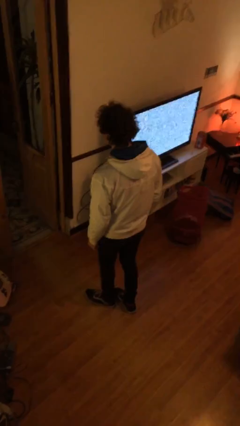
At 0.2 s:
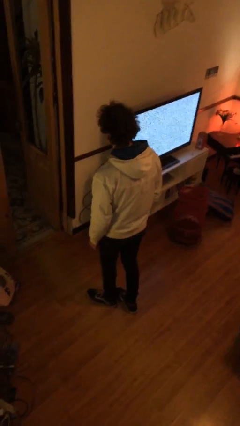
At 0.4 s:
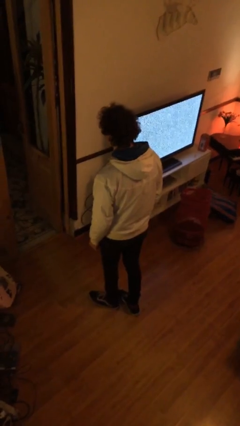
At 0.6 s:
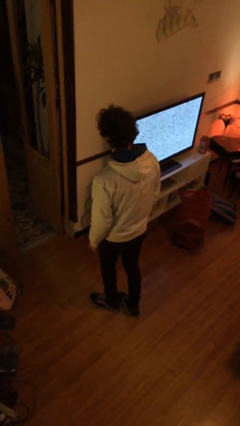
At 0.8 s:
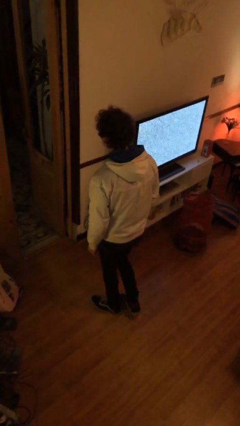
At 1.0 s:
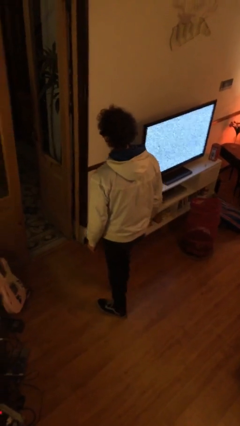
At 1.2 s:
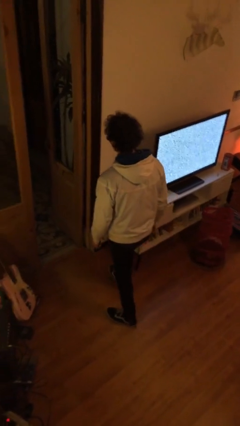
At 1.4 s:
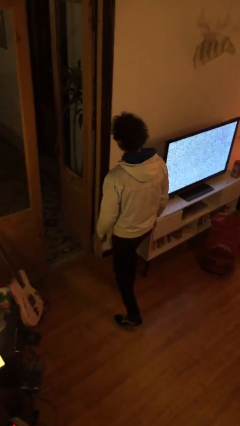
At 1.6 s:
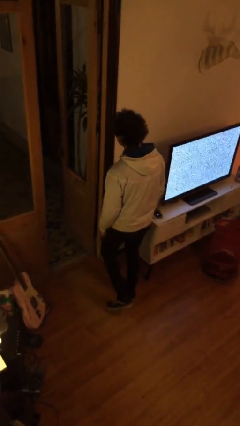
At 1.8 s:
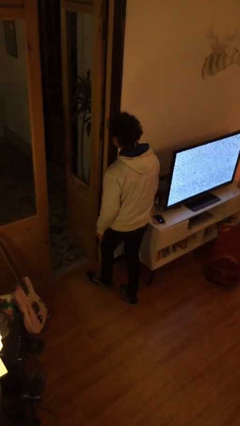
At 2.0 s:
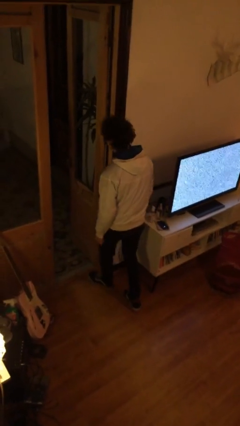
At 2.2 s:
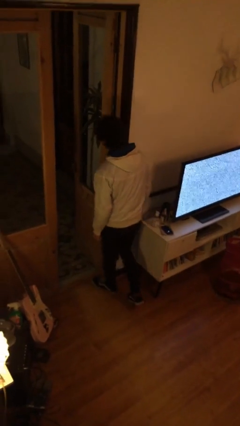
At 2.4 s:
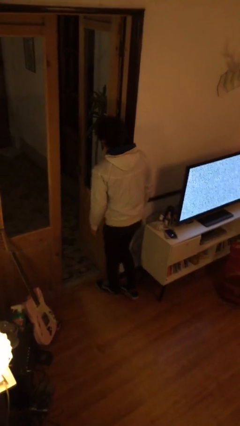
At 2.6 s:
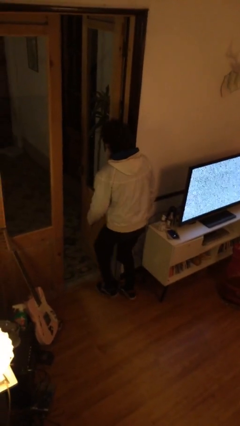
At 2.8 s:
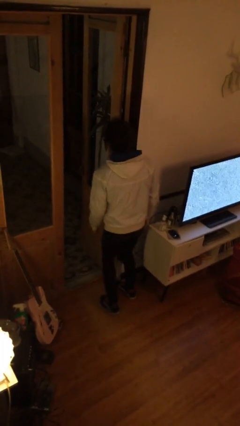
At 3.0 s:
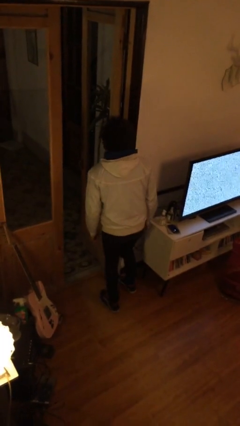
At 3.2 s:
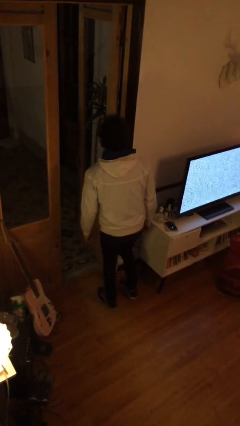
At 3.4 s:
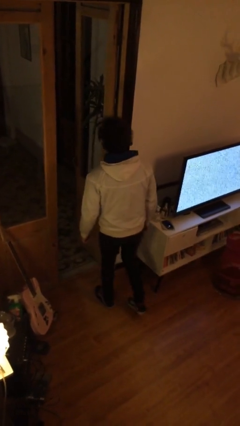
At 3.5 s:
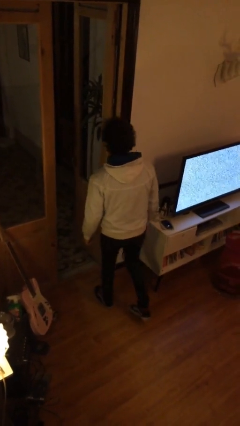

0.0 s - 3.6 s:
person bumps into wall

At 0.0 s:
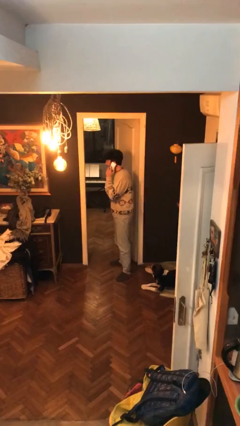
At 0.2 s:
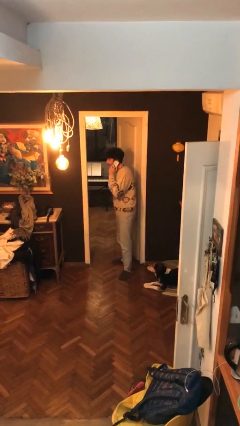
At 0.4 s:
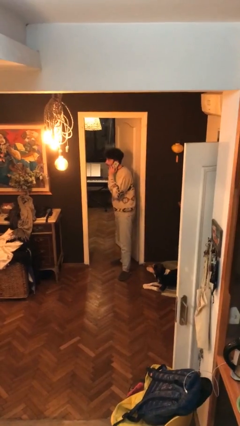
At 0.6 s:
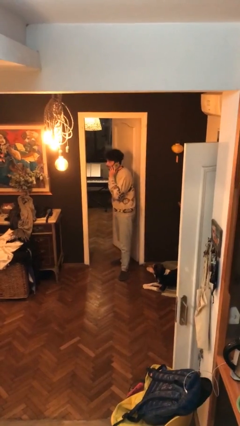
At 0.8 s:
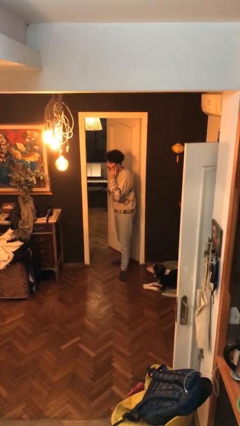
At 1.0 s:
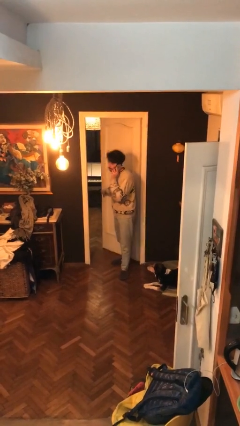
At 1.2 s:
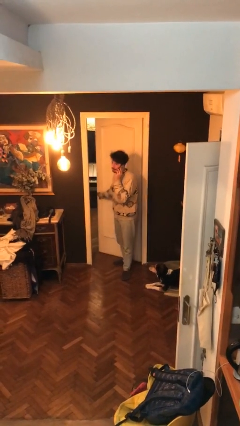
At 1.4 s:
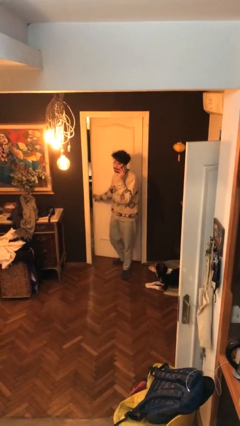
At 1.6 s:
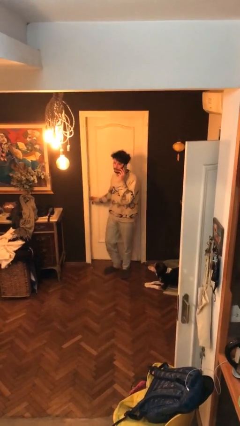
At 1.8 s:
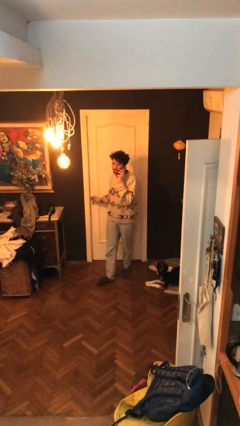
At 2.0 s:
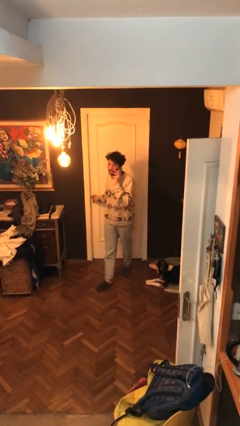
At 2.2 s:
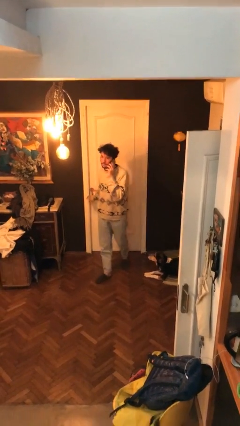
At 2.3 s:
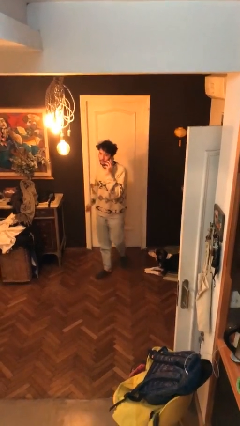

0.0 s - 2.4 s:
person closes facility door

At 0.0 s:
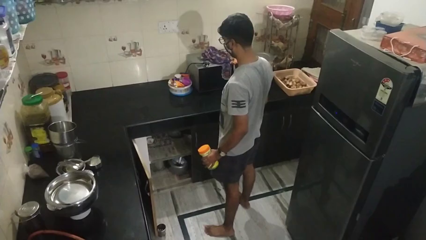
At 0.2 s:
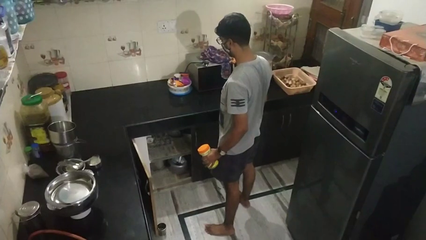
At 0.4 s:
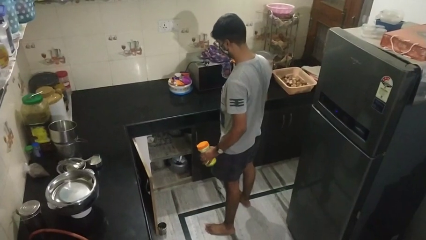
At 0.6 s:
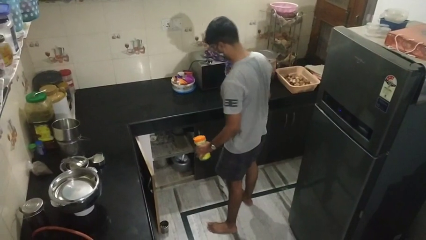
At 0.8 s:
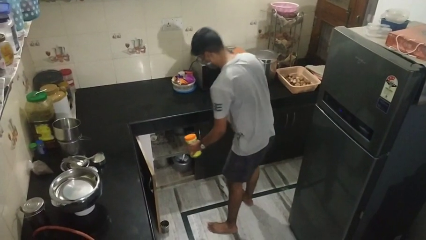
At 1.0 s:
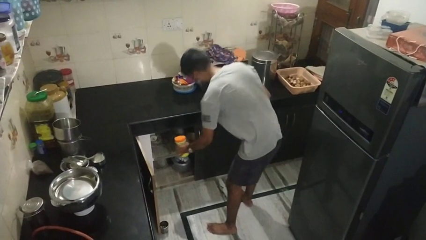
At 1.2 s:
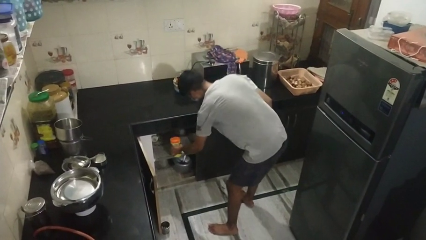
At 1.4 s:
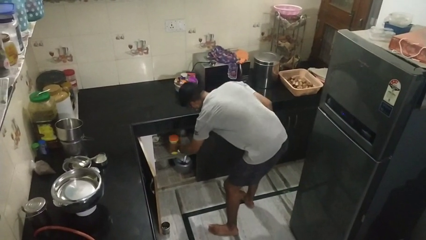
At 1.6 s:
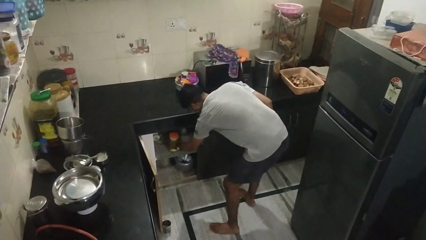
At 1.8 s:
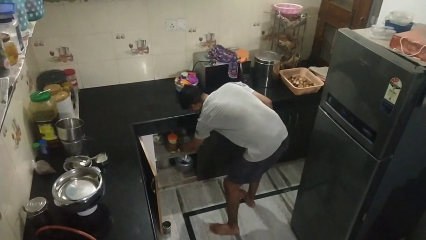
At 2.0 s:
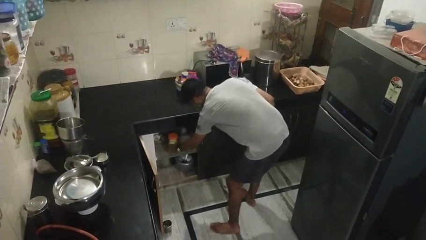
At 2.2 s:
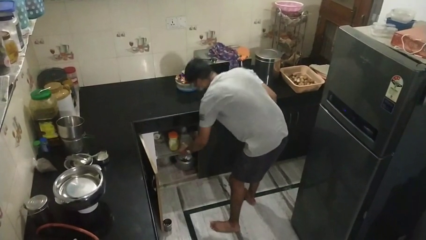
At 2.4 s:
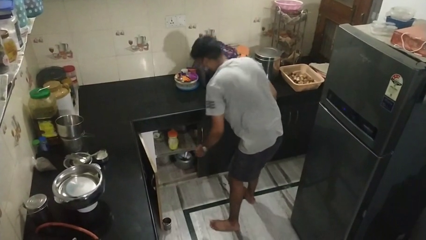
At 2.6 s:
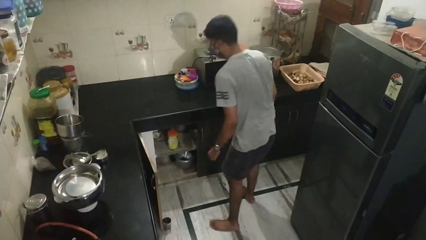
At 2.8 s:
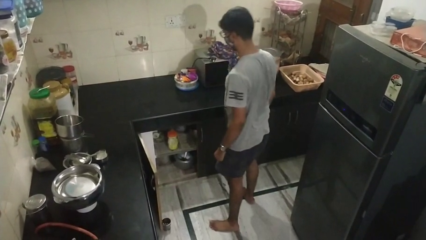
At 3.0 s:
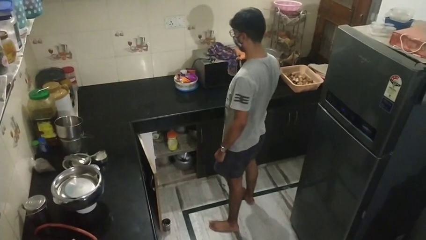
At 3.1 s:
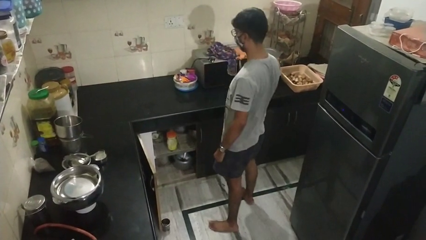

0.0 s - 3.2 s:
person puts down object into cabinet

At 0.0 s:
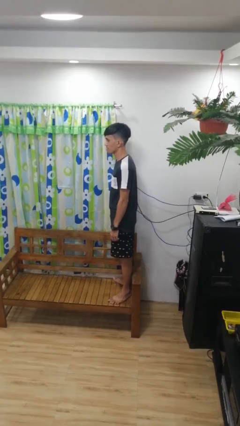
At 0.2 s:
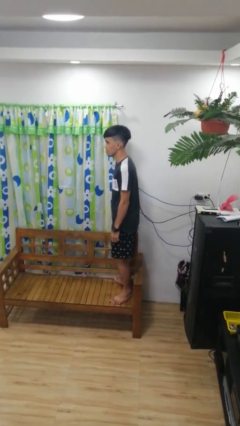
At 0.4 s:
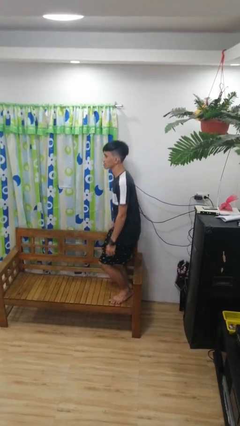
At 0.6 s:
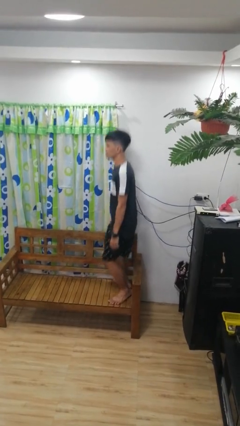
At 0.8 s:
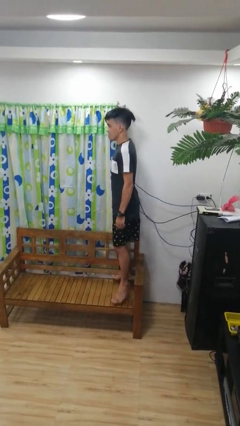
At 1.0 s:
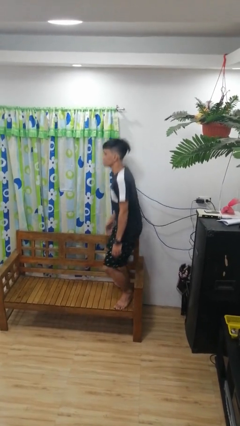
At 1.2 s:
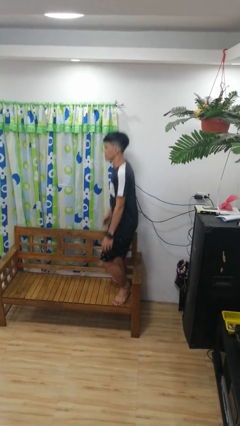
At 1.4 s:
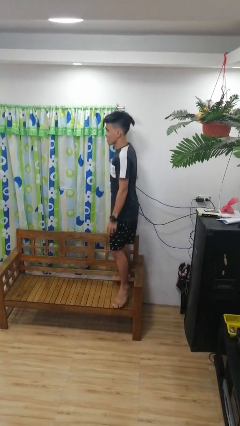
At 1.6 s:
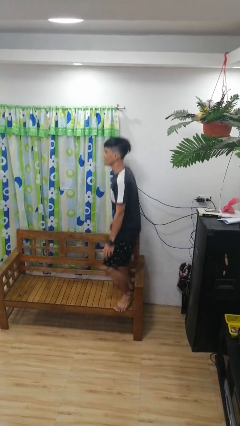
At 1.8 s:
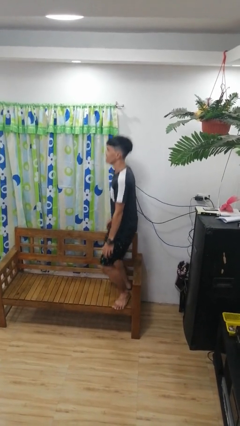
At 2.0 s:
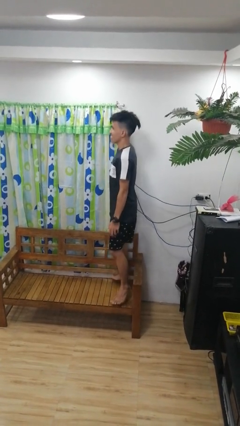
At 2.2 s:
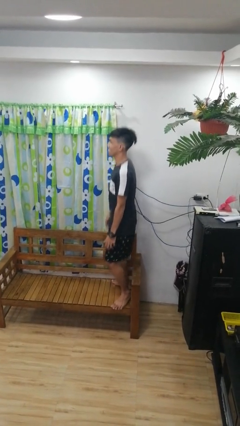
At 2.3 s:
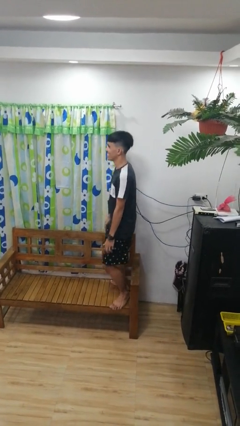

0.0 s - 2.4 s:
person jumps on couch

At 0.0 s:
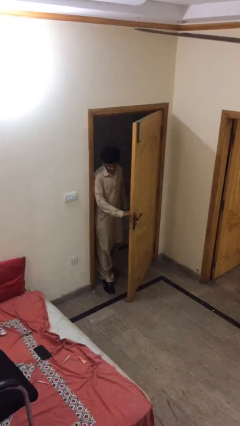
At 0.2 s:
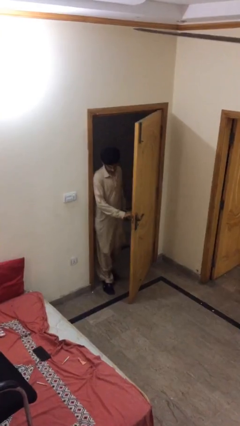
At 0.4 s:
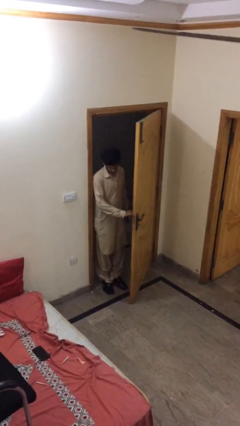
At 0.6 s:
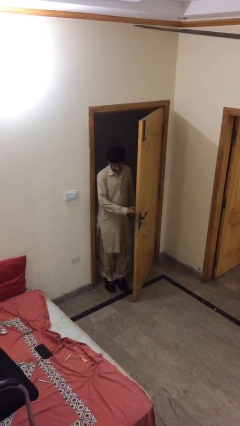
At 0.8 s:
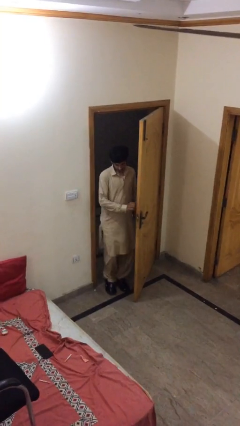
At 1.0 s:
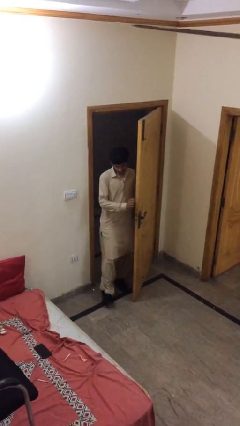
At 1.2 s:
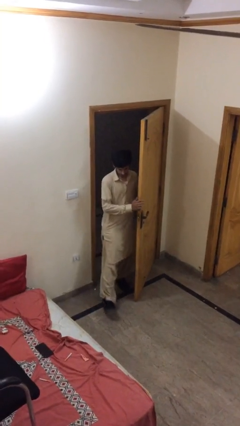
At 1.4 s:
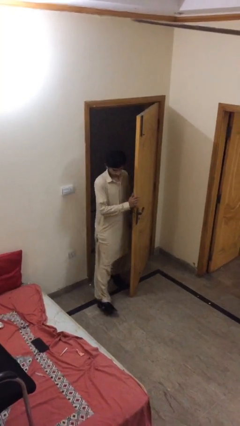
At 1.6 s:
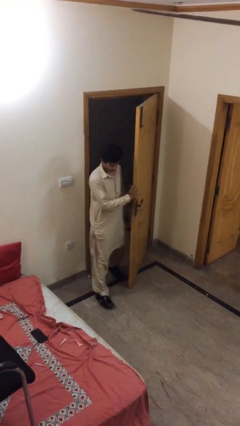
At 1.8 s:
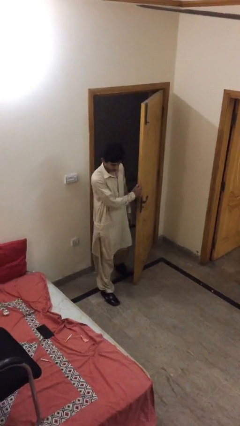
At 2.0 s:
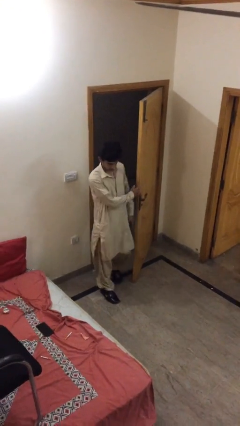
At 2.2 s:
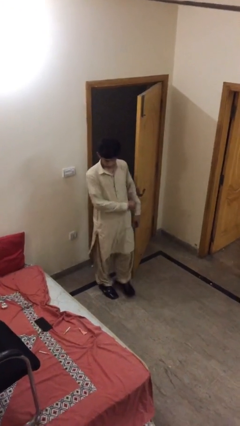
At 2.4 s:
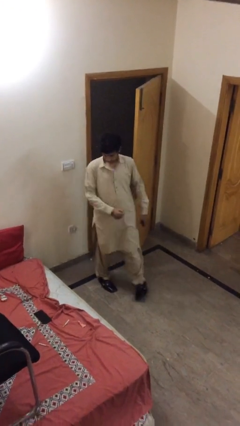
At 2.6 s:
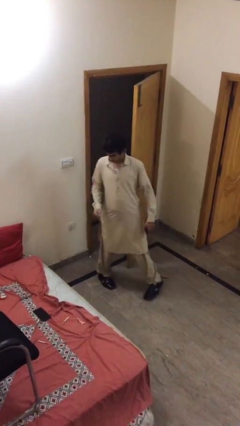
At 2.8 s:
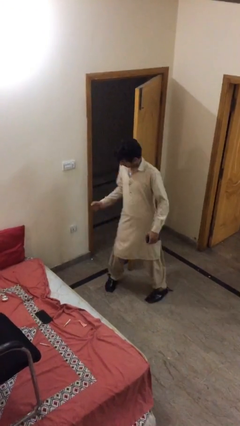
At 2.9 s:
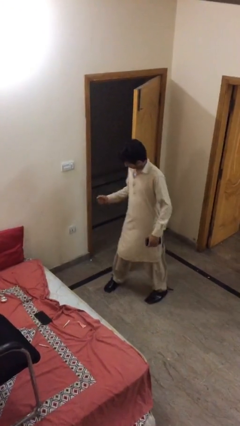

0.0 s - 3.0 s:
person enters scene through structure

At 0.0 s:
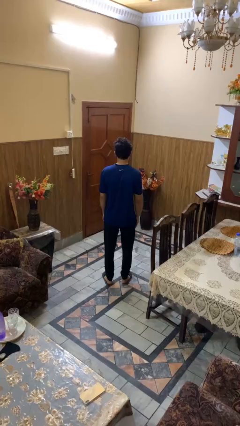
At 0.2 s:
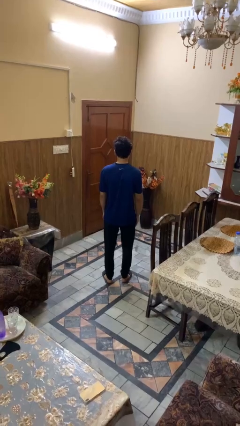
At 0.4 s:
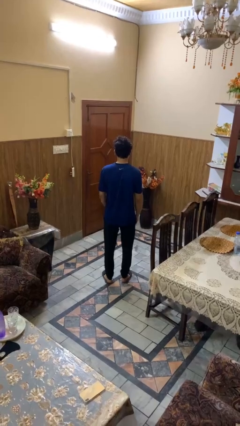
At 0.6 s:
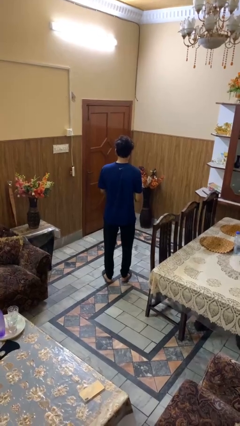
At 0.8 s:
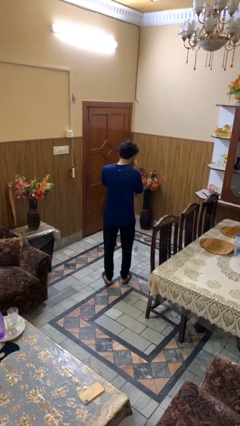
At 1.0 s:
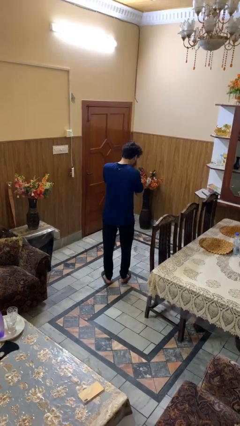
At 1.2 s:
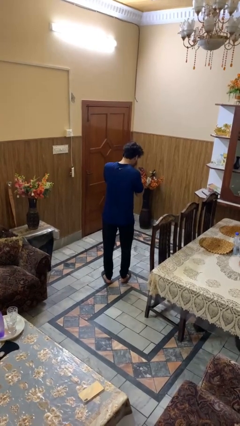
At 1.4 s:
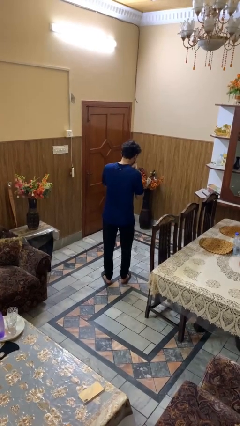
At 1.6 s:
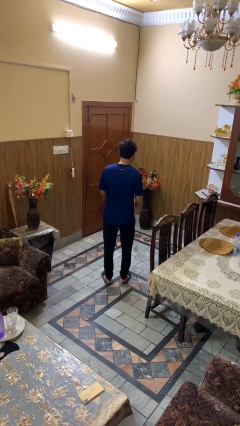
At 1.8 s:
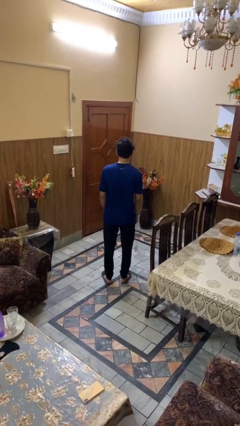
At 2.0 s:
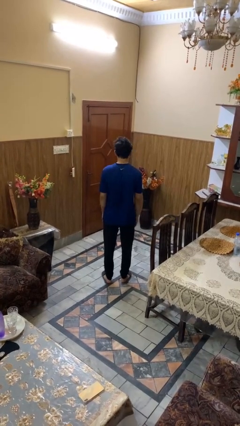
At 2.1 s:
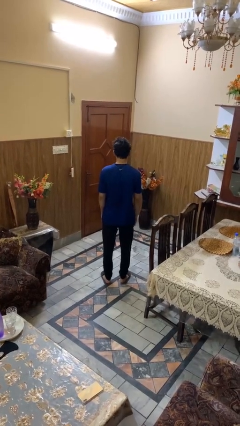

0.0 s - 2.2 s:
person sneezes into hand

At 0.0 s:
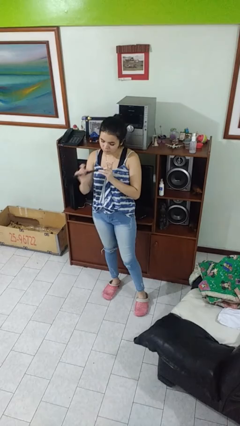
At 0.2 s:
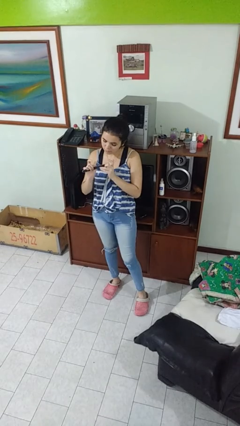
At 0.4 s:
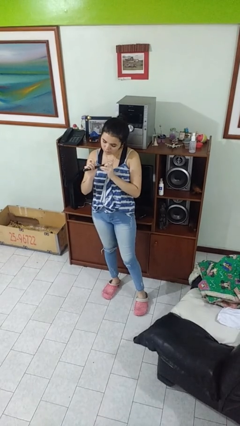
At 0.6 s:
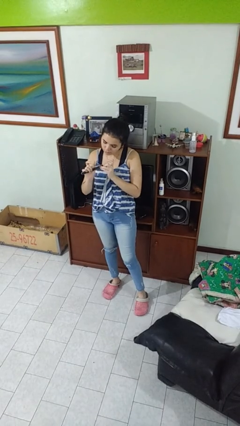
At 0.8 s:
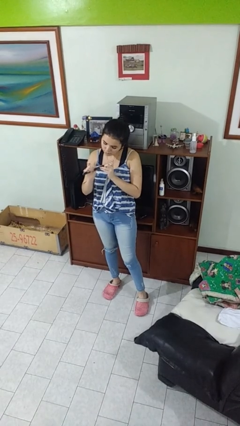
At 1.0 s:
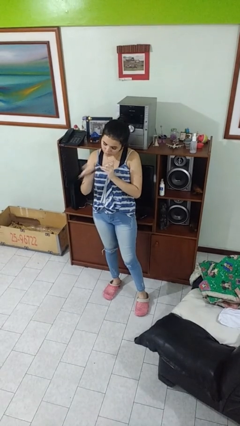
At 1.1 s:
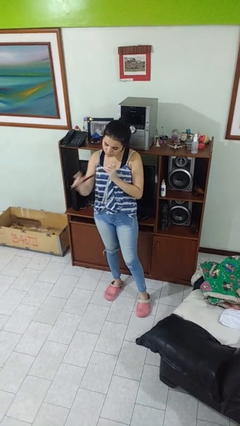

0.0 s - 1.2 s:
person files fingernails
